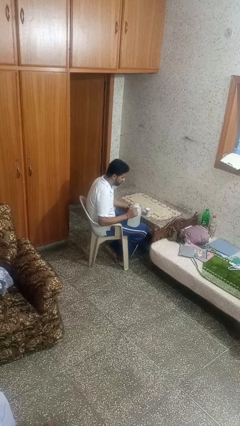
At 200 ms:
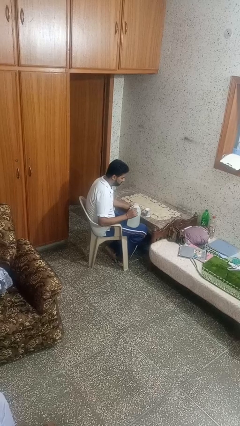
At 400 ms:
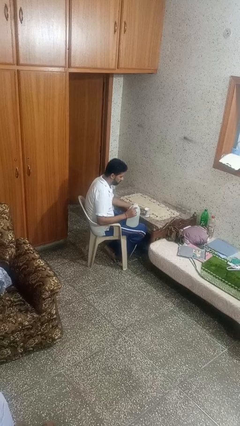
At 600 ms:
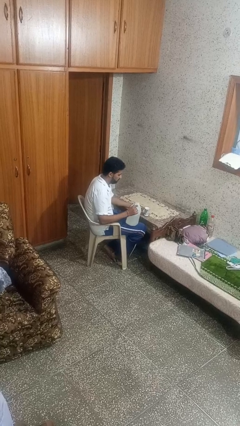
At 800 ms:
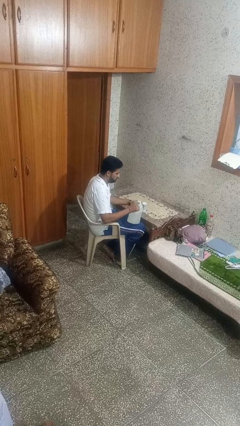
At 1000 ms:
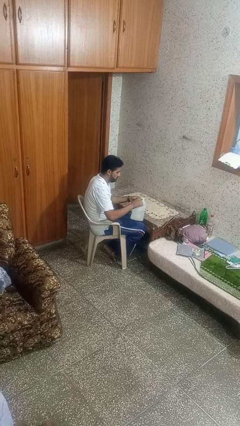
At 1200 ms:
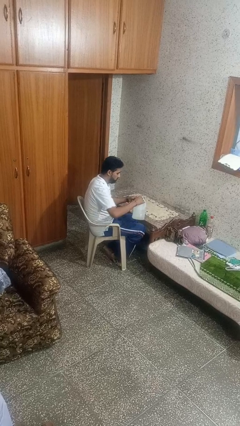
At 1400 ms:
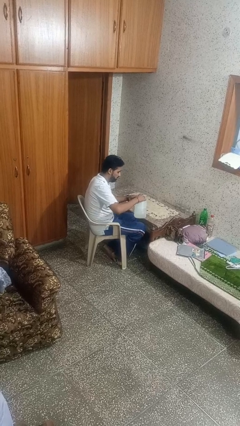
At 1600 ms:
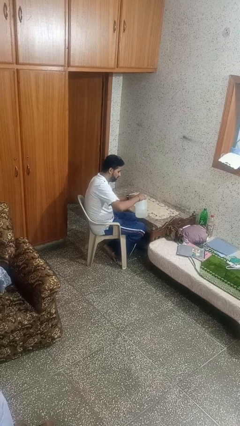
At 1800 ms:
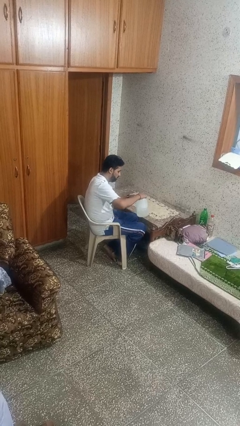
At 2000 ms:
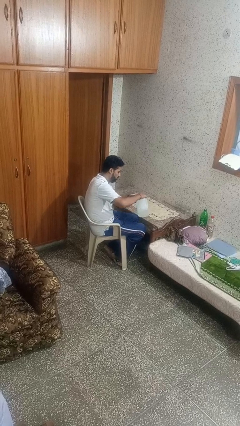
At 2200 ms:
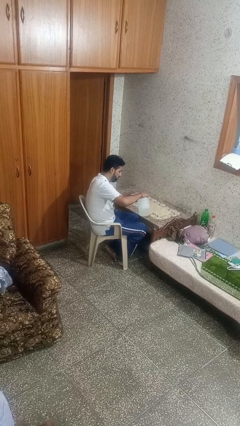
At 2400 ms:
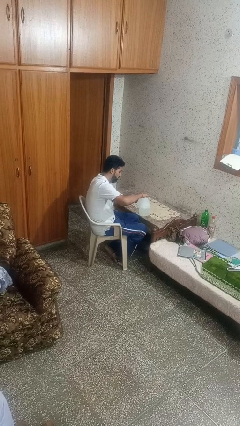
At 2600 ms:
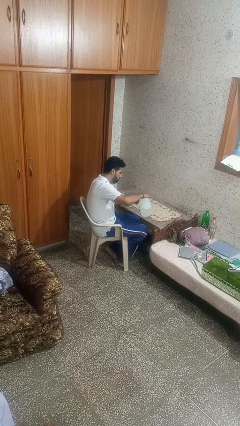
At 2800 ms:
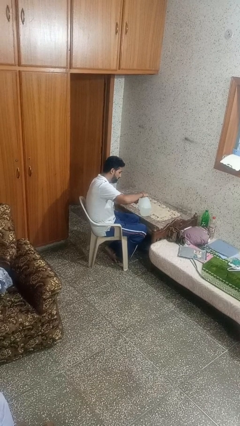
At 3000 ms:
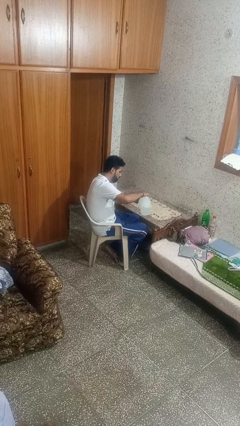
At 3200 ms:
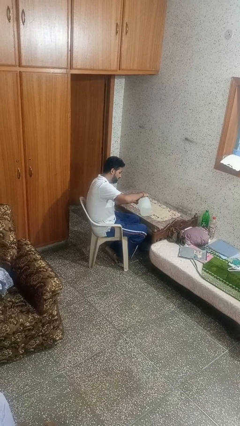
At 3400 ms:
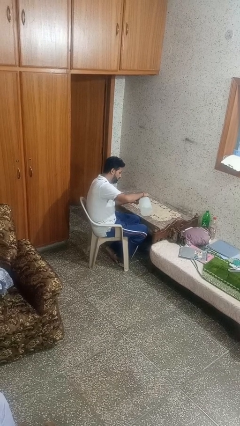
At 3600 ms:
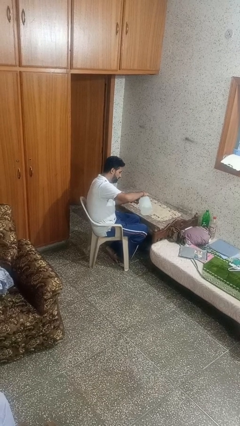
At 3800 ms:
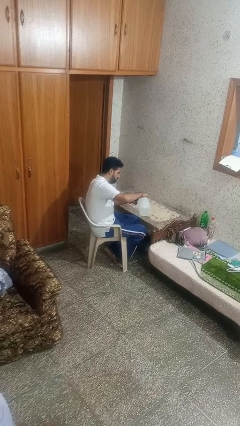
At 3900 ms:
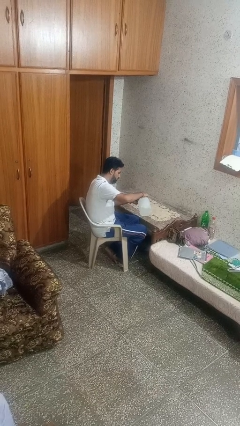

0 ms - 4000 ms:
person pours liquid into cup

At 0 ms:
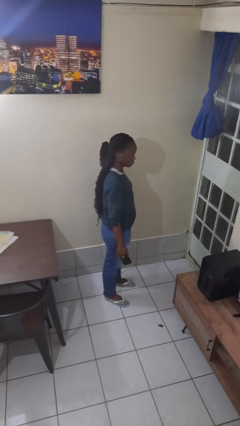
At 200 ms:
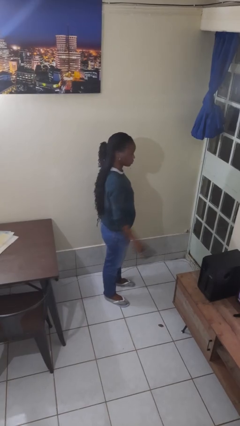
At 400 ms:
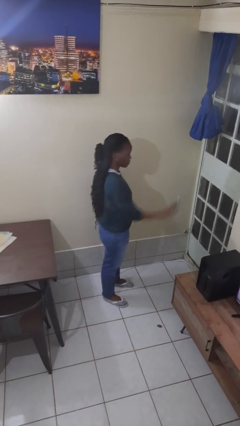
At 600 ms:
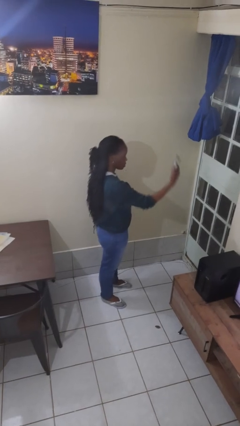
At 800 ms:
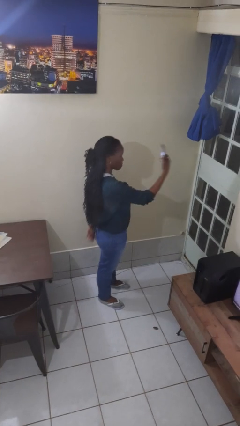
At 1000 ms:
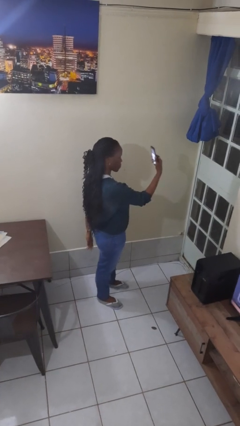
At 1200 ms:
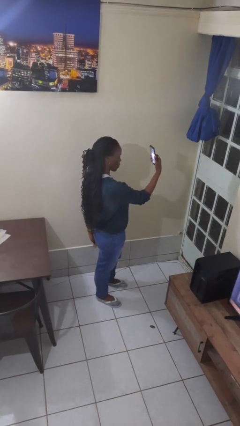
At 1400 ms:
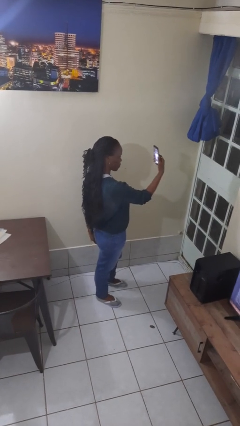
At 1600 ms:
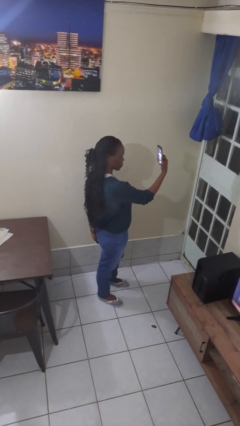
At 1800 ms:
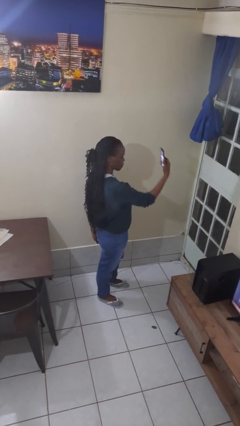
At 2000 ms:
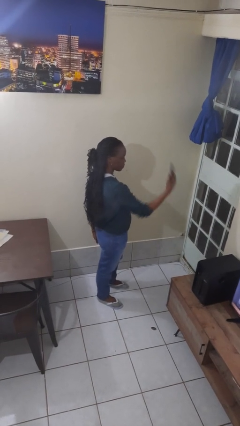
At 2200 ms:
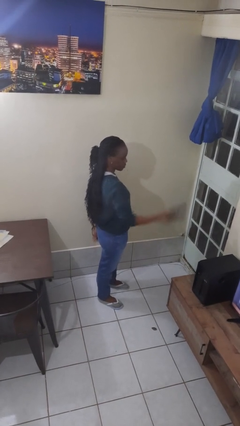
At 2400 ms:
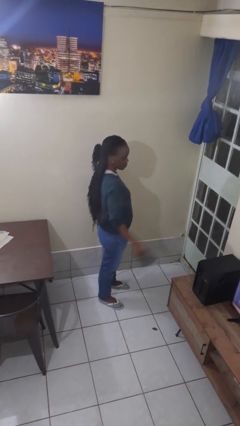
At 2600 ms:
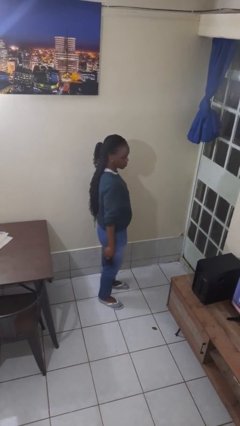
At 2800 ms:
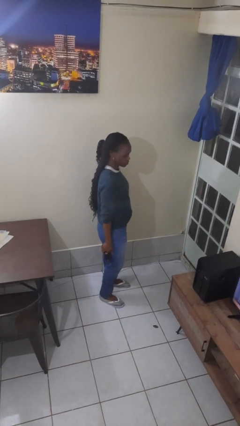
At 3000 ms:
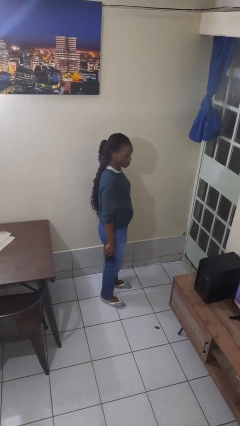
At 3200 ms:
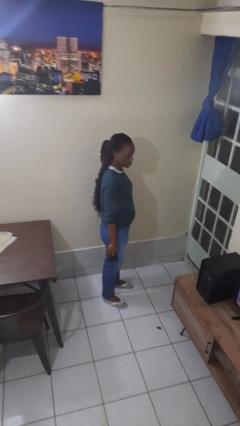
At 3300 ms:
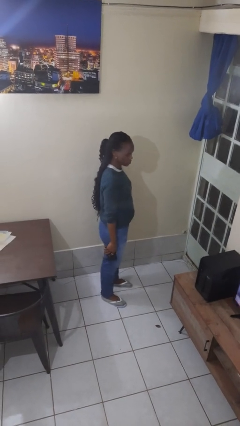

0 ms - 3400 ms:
person takes selfie

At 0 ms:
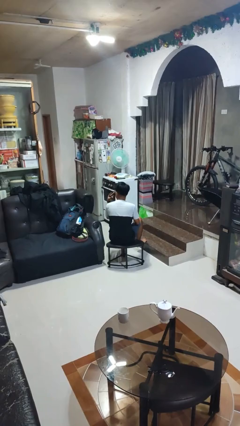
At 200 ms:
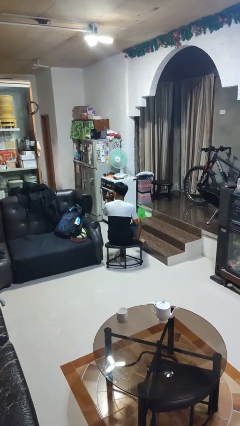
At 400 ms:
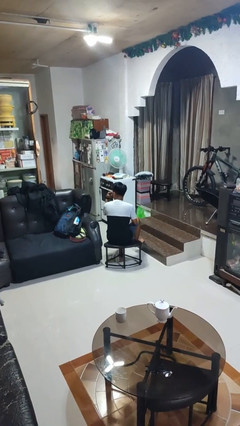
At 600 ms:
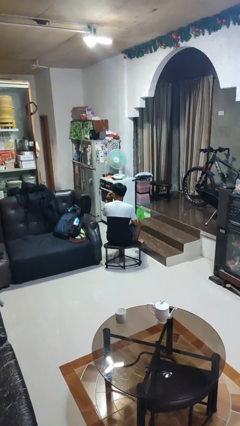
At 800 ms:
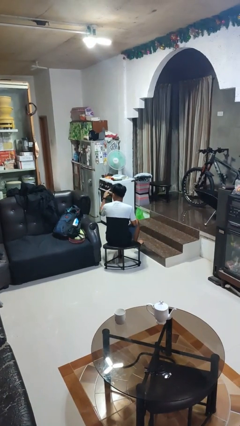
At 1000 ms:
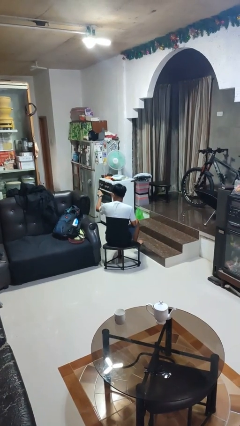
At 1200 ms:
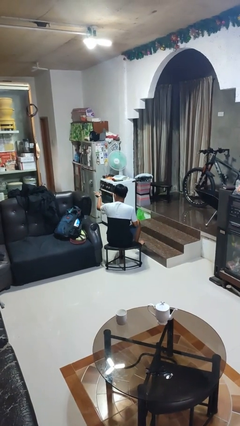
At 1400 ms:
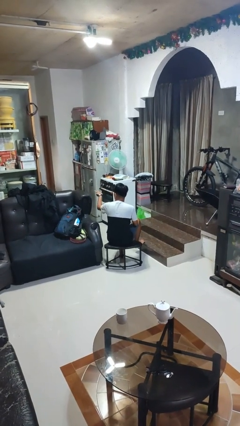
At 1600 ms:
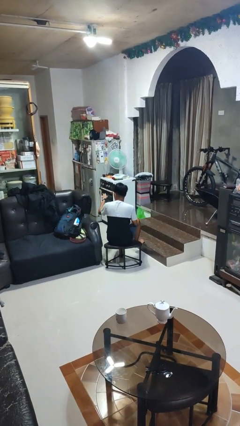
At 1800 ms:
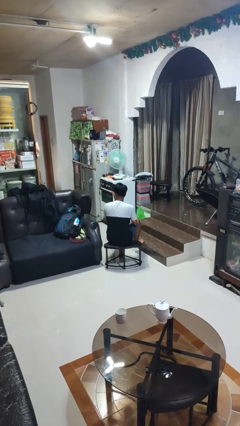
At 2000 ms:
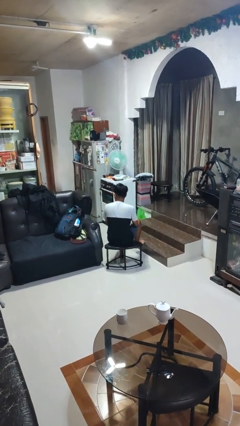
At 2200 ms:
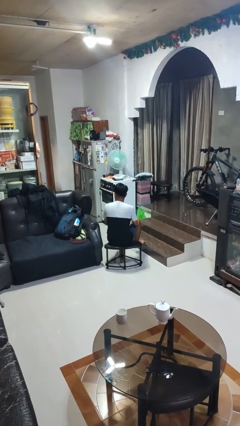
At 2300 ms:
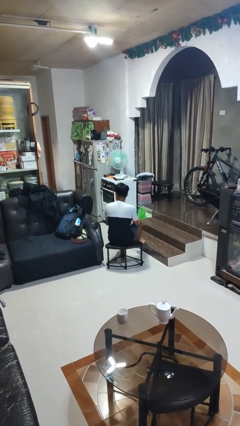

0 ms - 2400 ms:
person gestures watch closely

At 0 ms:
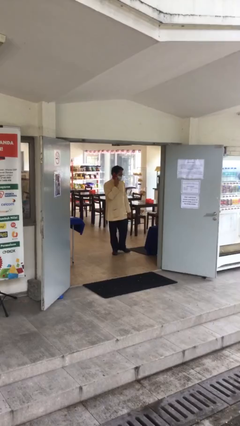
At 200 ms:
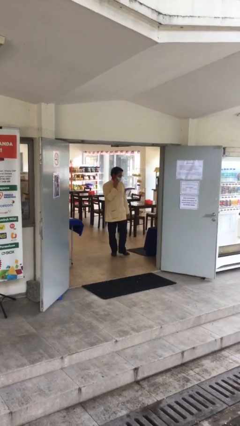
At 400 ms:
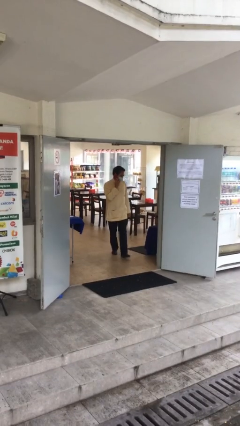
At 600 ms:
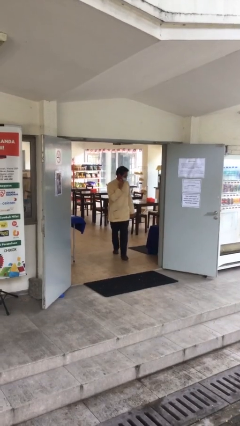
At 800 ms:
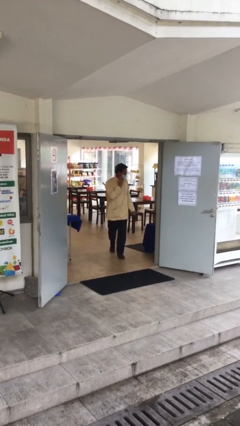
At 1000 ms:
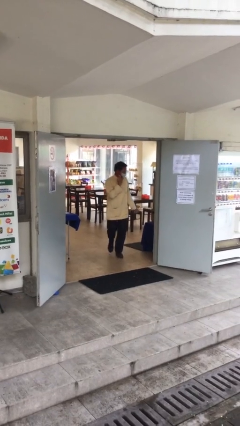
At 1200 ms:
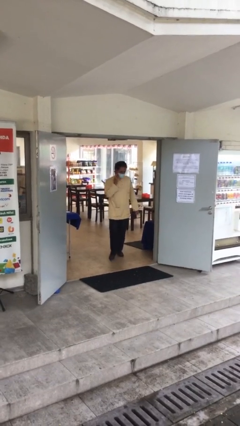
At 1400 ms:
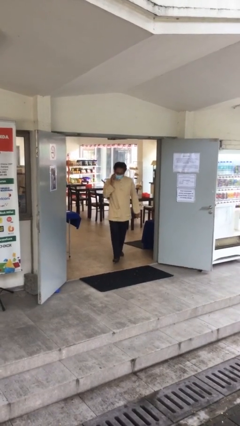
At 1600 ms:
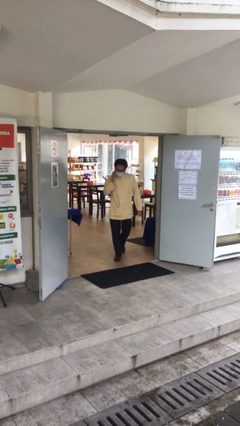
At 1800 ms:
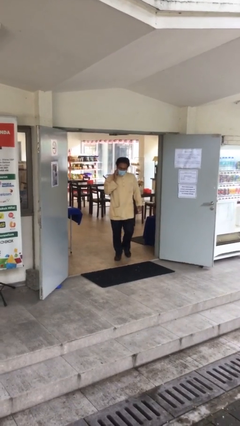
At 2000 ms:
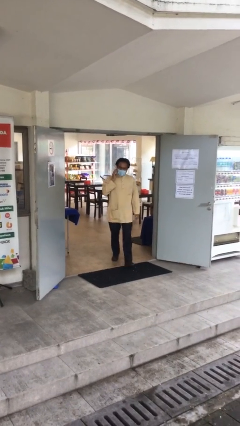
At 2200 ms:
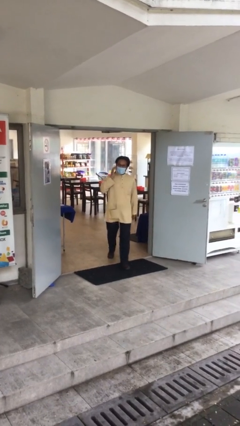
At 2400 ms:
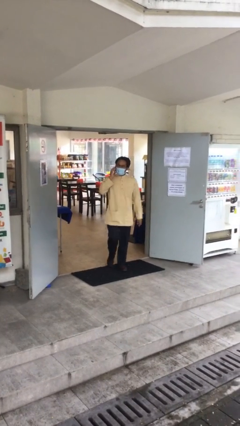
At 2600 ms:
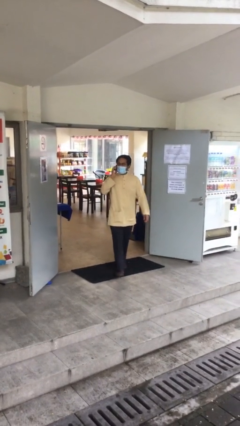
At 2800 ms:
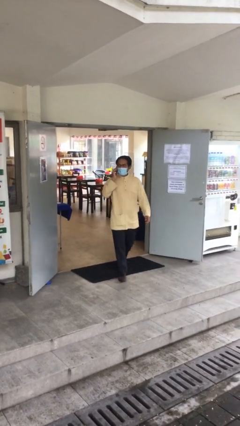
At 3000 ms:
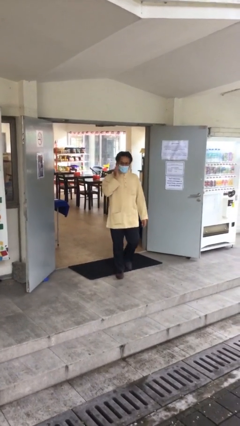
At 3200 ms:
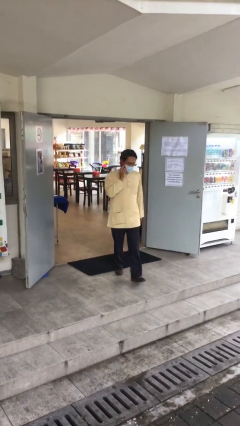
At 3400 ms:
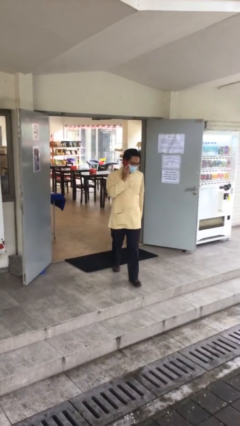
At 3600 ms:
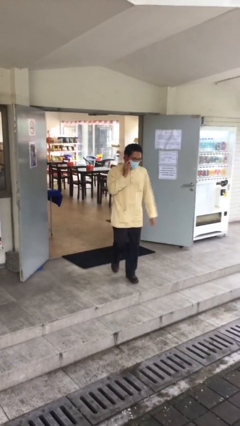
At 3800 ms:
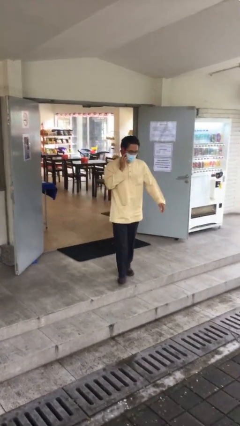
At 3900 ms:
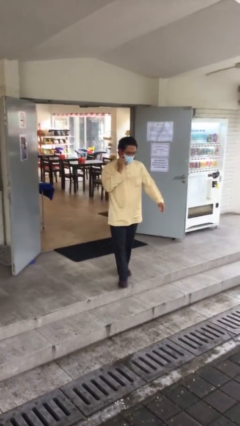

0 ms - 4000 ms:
person enters scene through structure

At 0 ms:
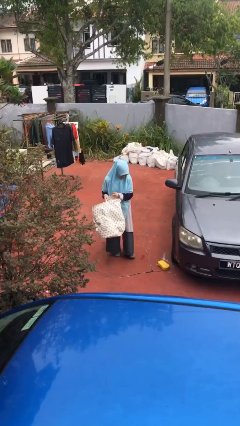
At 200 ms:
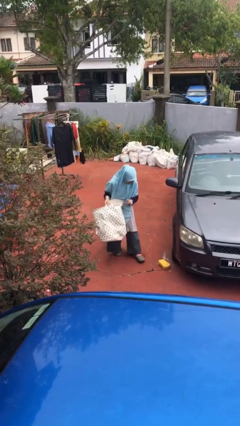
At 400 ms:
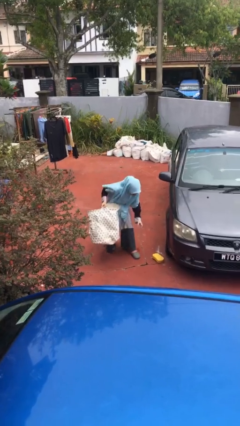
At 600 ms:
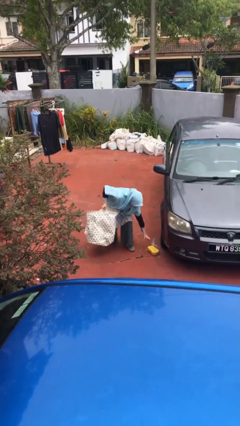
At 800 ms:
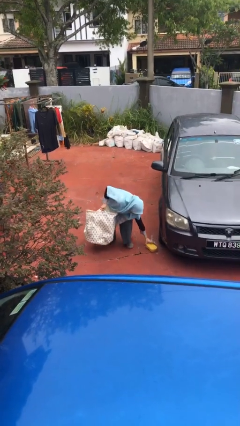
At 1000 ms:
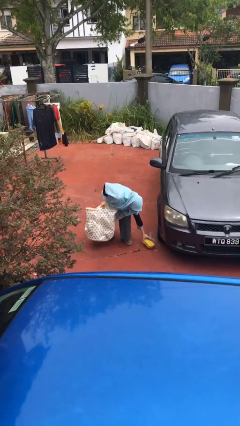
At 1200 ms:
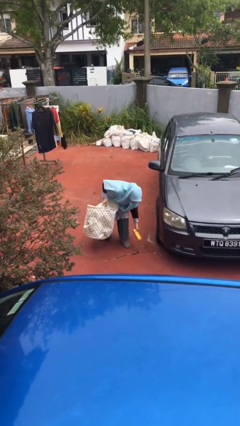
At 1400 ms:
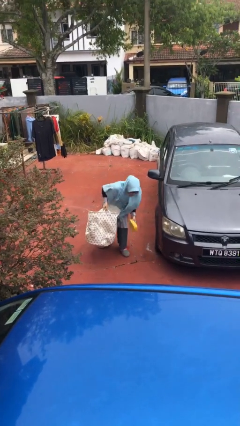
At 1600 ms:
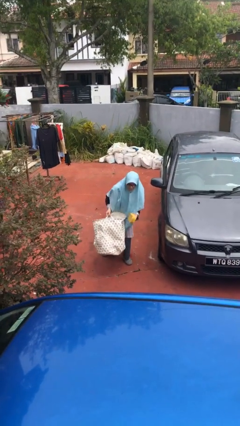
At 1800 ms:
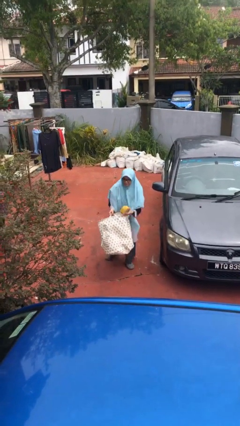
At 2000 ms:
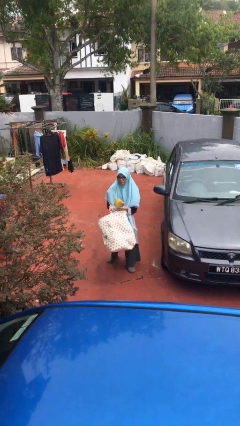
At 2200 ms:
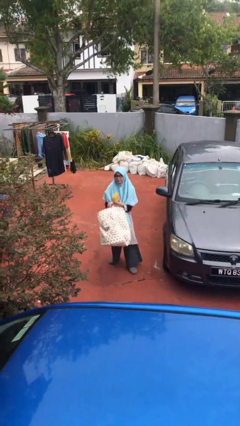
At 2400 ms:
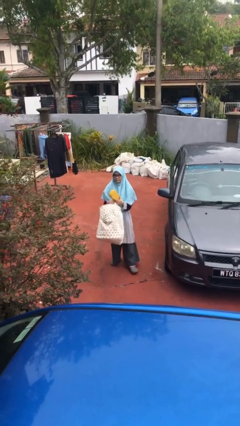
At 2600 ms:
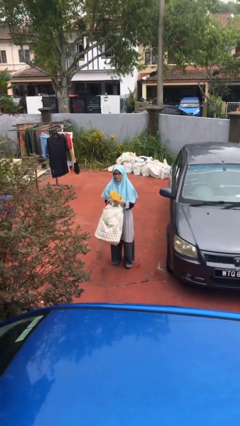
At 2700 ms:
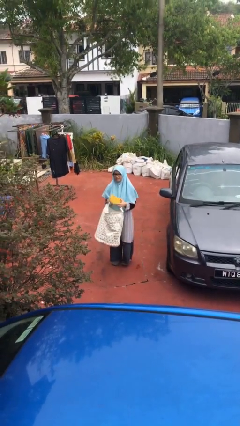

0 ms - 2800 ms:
person picks up object from floor

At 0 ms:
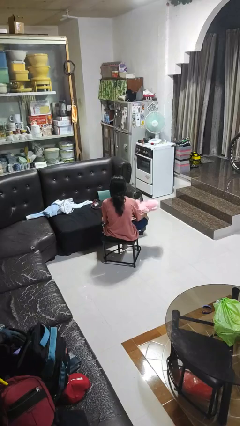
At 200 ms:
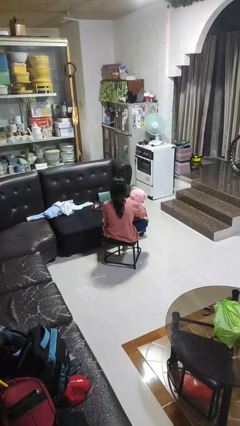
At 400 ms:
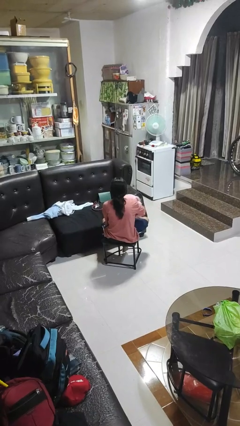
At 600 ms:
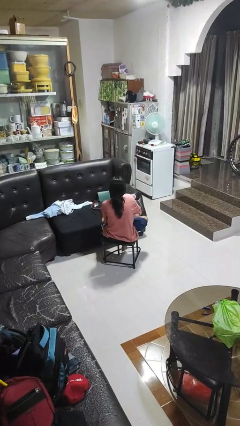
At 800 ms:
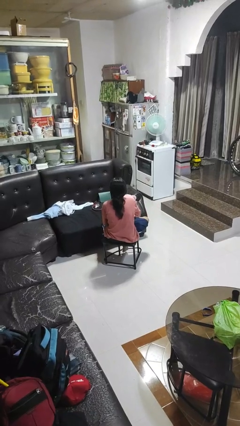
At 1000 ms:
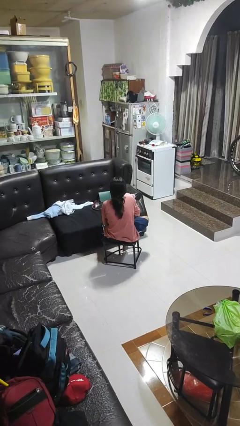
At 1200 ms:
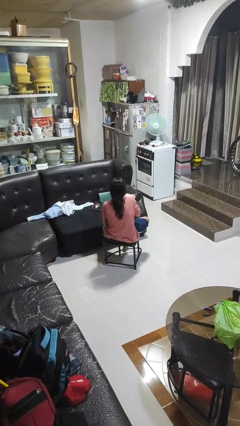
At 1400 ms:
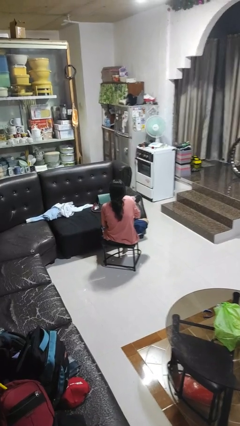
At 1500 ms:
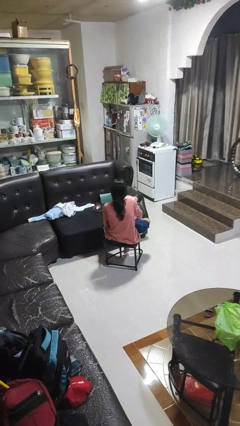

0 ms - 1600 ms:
person hugs stuffed animal
